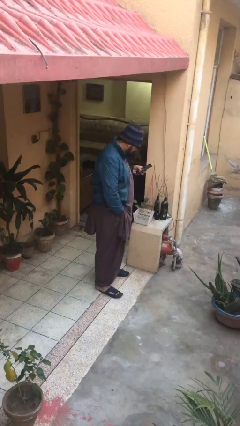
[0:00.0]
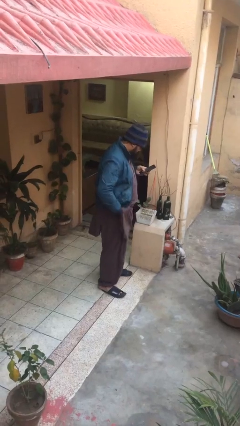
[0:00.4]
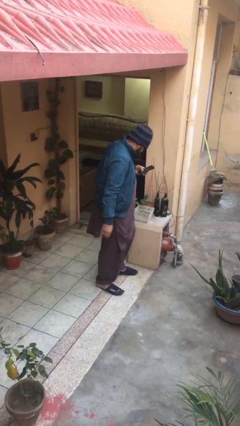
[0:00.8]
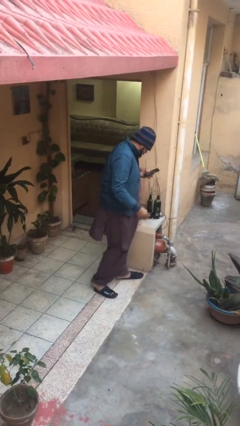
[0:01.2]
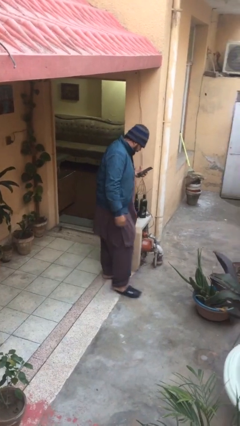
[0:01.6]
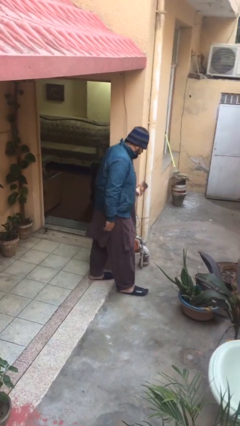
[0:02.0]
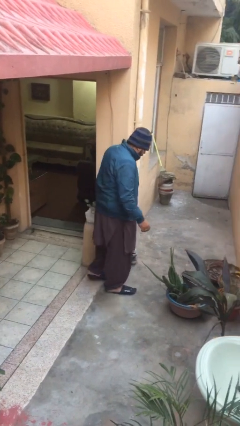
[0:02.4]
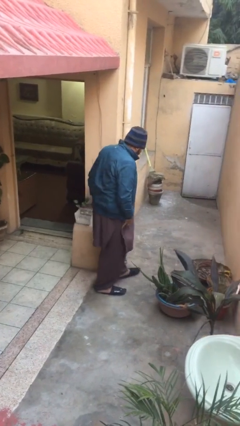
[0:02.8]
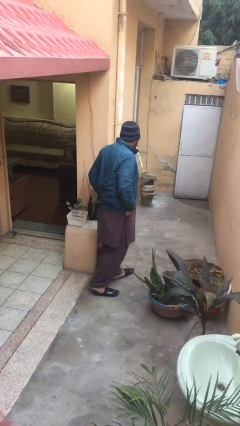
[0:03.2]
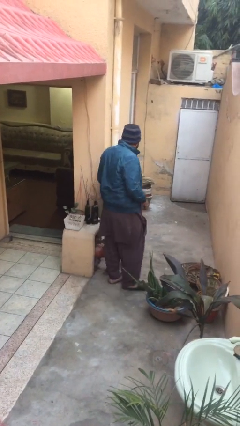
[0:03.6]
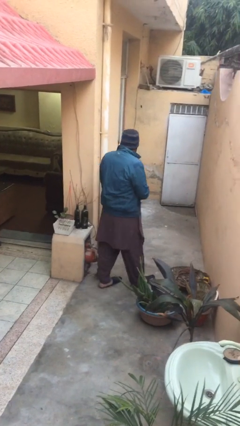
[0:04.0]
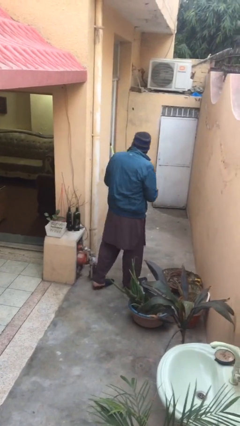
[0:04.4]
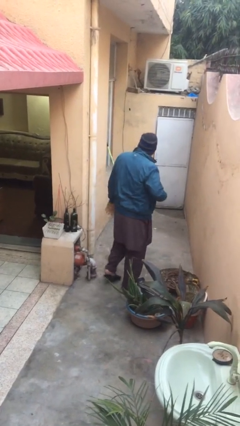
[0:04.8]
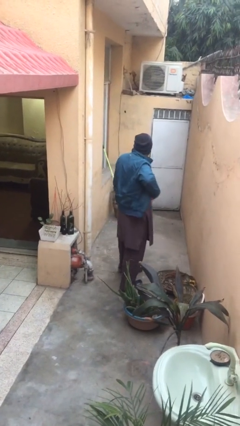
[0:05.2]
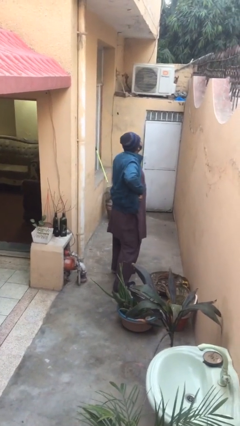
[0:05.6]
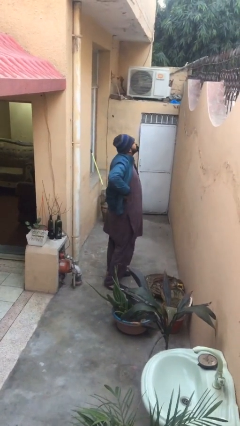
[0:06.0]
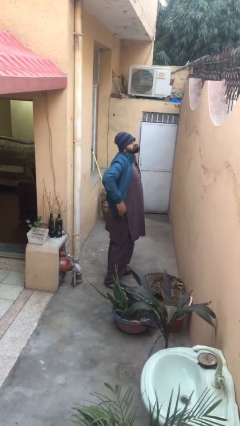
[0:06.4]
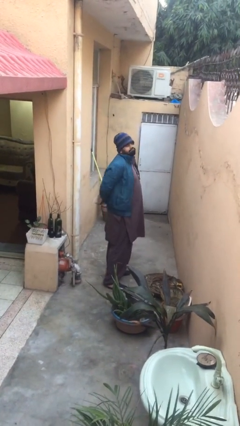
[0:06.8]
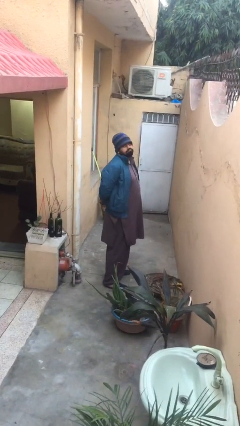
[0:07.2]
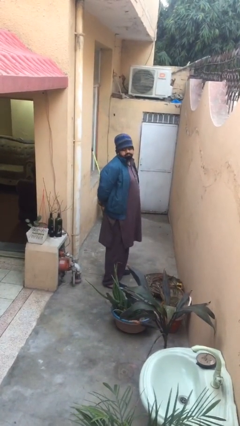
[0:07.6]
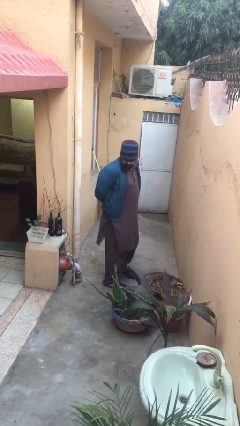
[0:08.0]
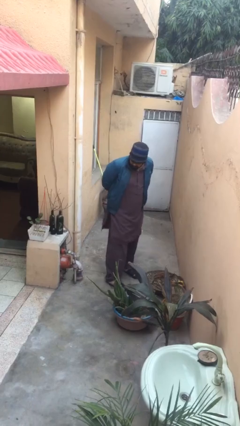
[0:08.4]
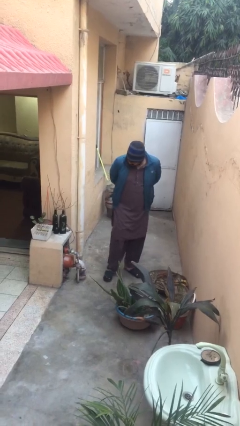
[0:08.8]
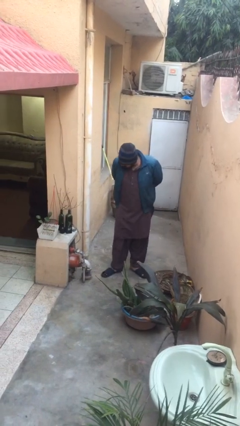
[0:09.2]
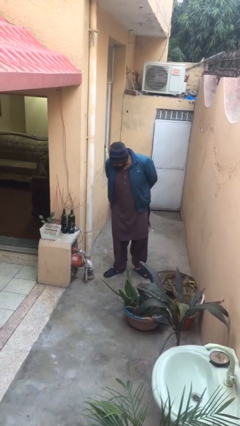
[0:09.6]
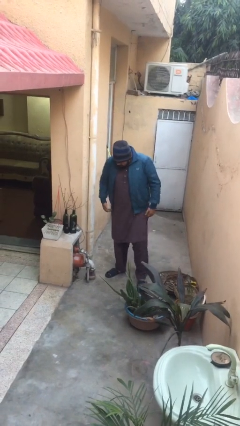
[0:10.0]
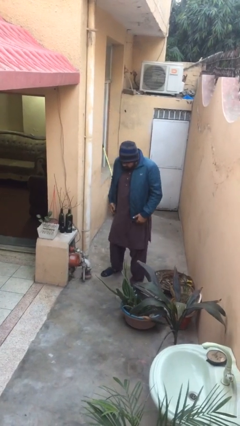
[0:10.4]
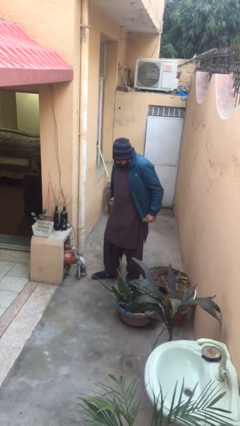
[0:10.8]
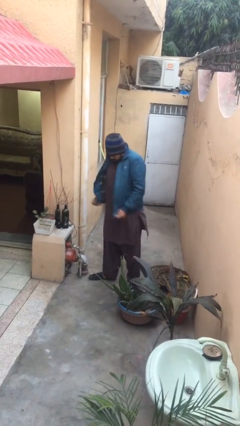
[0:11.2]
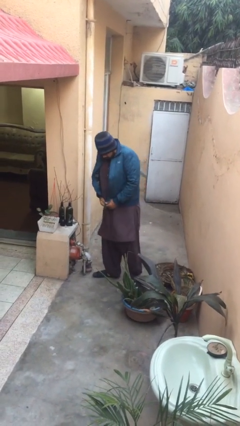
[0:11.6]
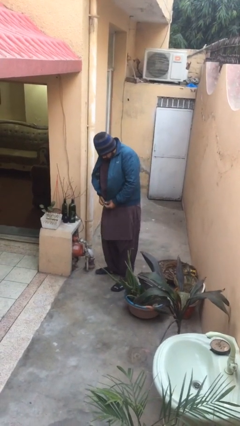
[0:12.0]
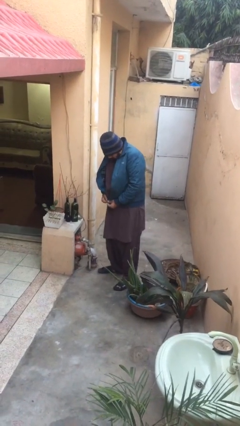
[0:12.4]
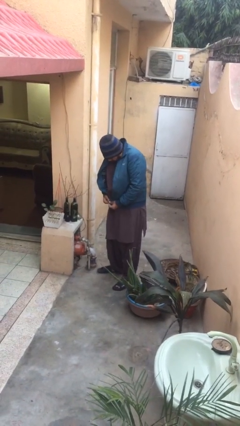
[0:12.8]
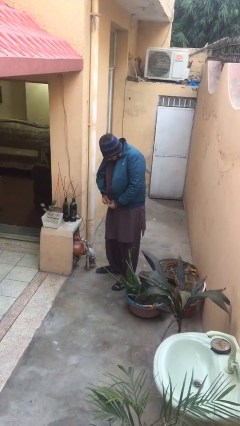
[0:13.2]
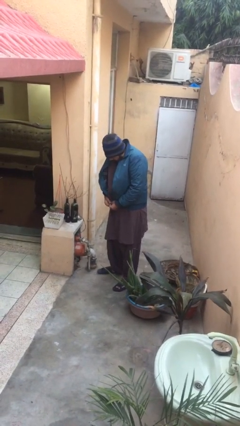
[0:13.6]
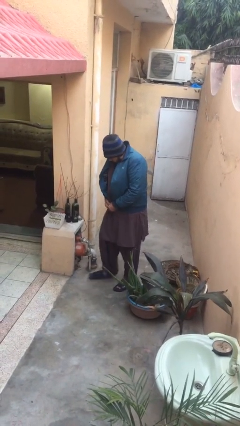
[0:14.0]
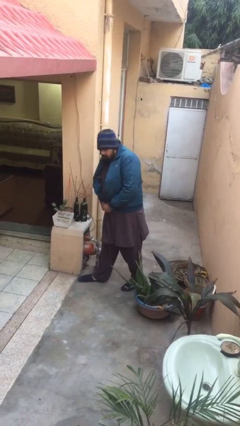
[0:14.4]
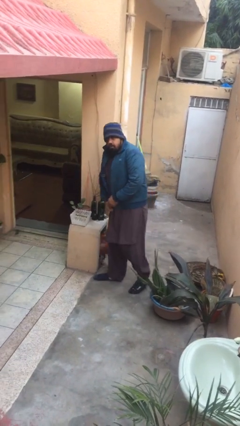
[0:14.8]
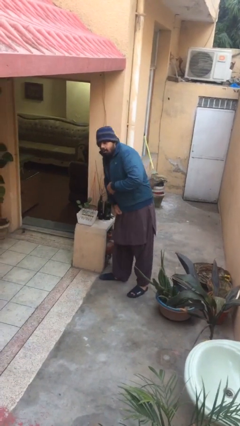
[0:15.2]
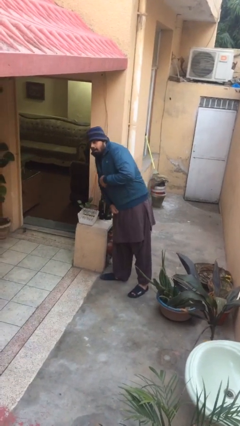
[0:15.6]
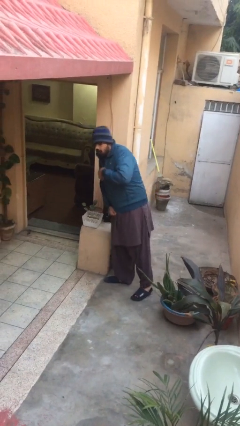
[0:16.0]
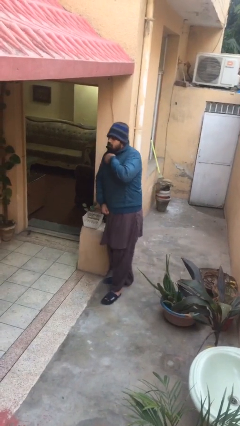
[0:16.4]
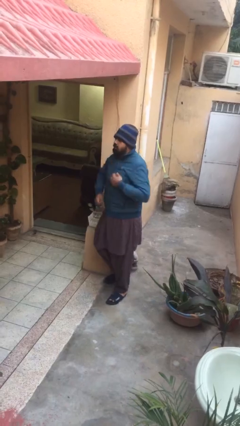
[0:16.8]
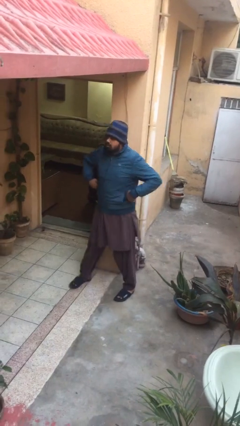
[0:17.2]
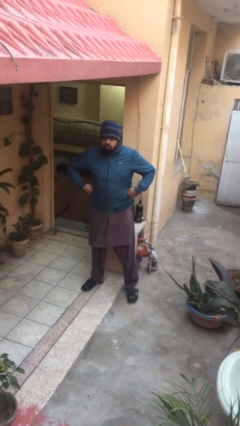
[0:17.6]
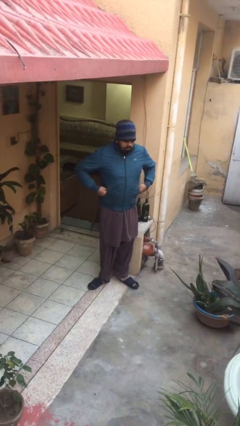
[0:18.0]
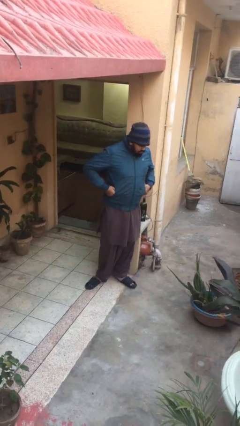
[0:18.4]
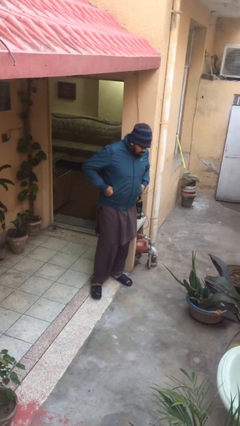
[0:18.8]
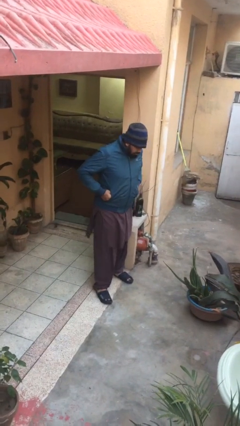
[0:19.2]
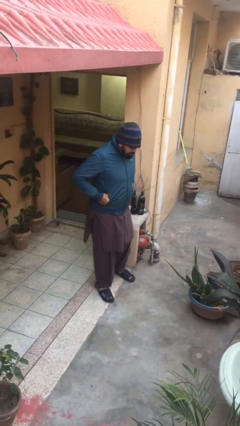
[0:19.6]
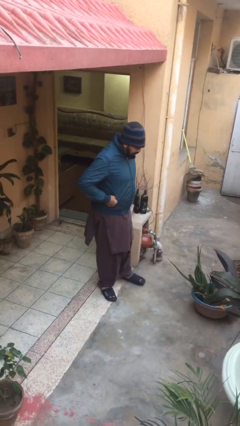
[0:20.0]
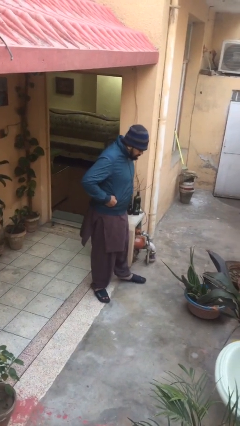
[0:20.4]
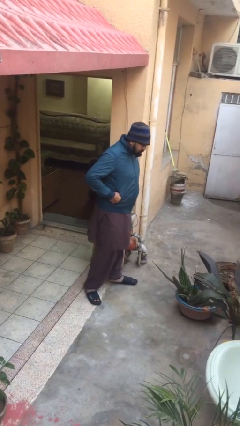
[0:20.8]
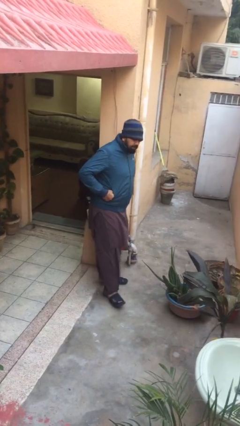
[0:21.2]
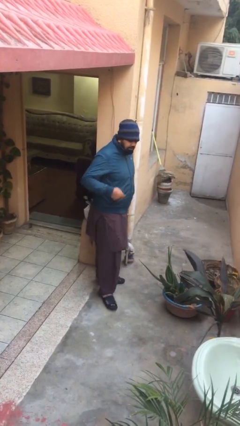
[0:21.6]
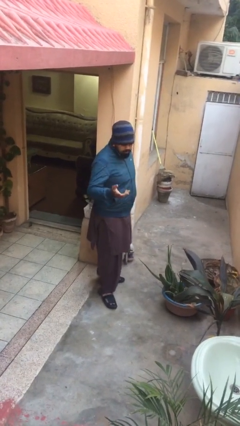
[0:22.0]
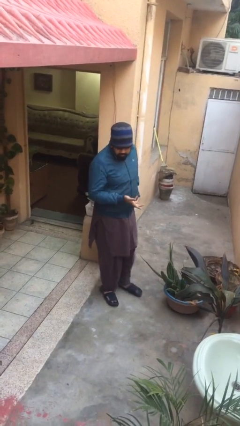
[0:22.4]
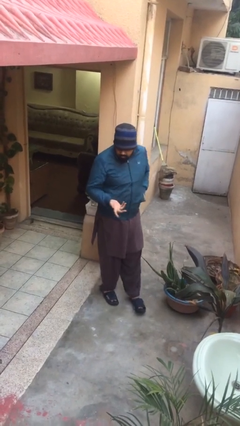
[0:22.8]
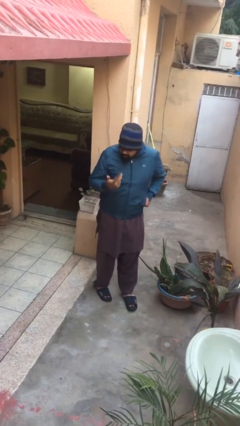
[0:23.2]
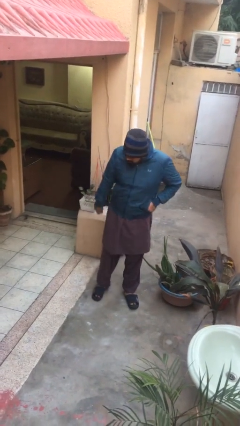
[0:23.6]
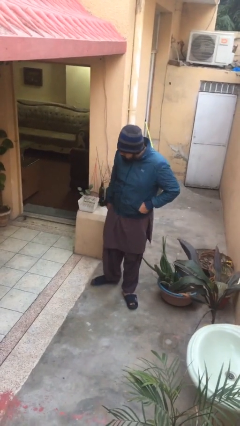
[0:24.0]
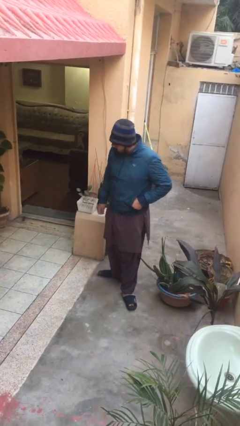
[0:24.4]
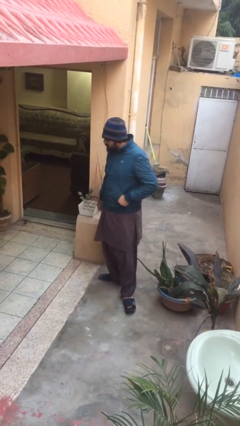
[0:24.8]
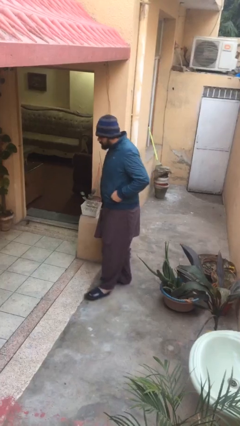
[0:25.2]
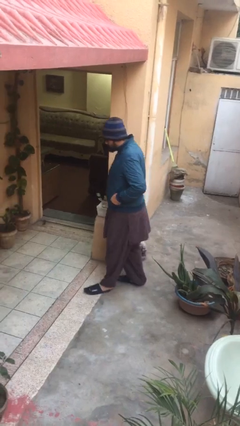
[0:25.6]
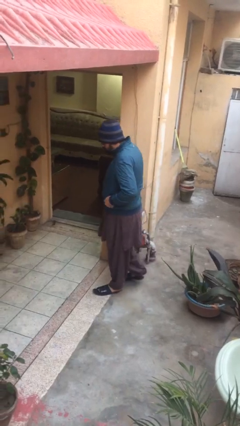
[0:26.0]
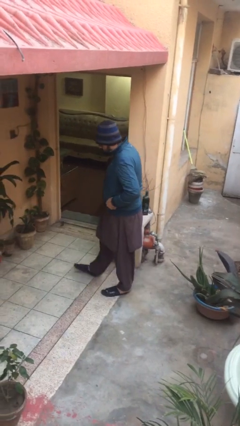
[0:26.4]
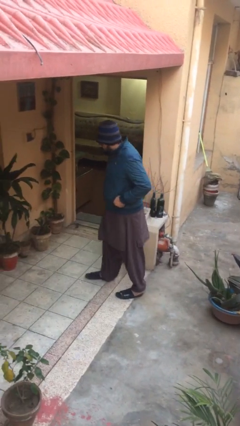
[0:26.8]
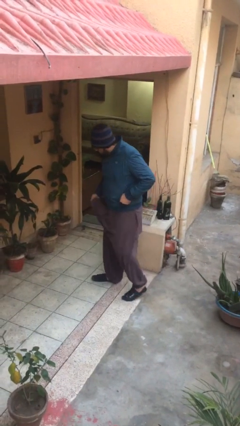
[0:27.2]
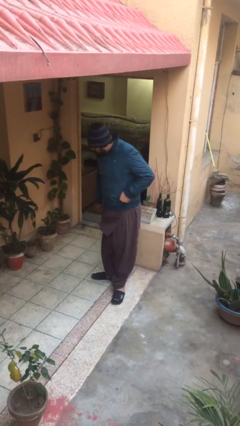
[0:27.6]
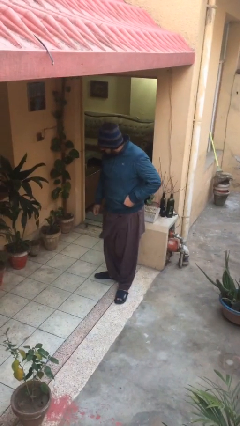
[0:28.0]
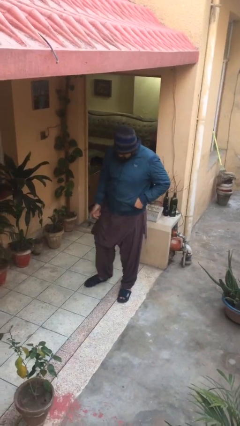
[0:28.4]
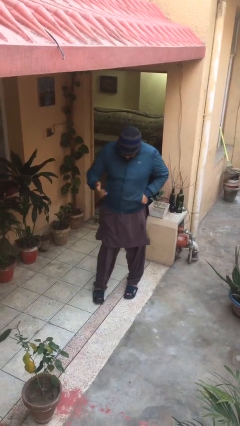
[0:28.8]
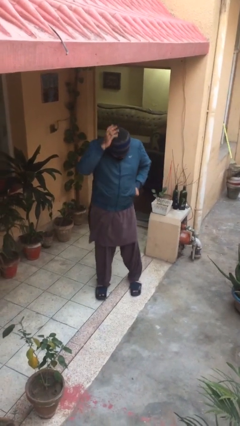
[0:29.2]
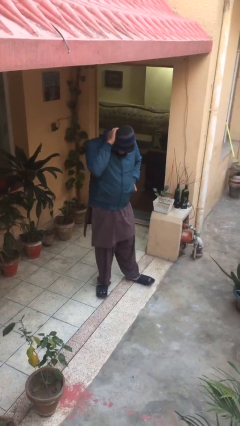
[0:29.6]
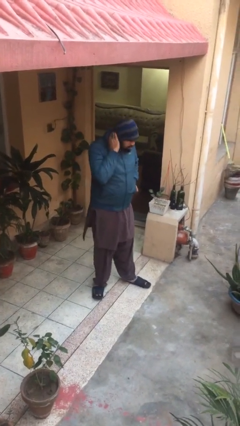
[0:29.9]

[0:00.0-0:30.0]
person walks

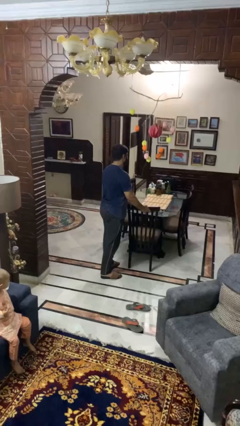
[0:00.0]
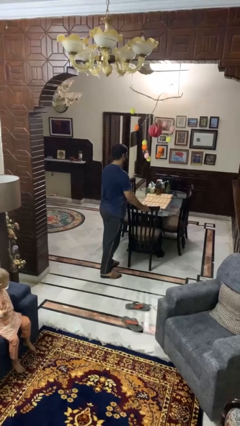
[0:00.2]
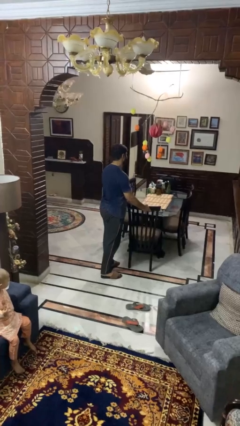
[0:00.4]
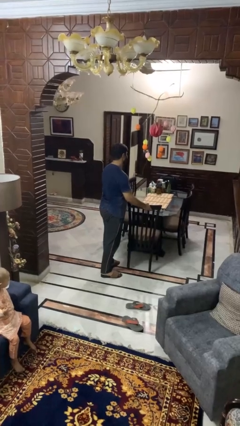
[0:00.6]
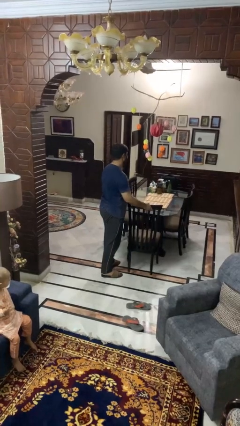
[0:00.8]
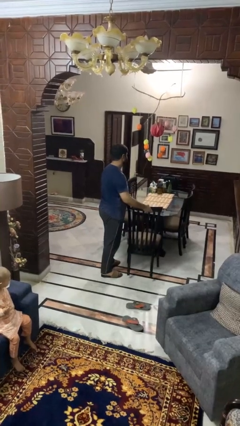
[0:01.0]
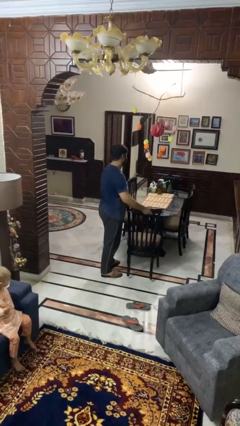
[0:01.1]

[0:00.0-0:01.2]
person pulls out chair

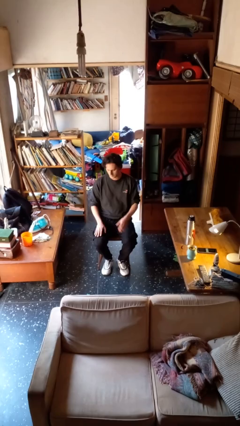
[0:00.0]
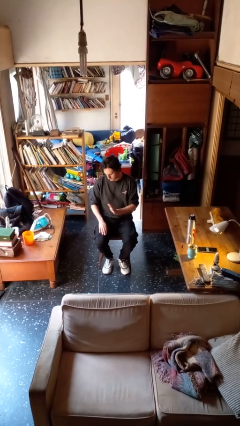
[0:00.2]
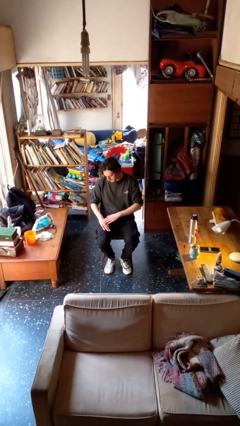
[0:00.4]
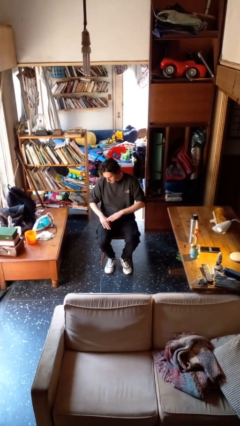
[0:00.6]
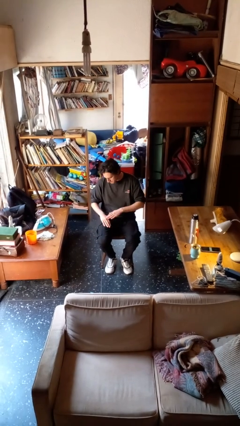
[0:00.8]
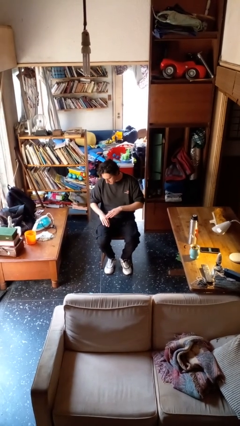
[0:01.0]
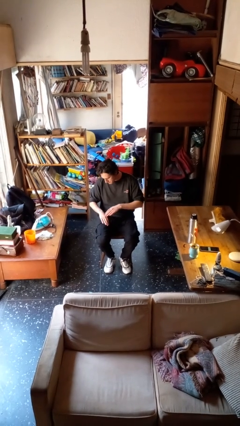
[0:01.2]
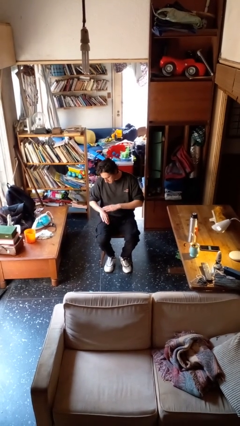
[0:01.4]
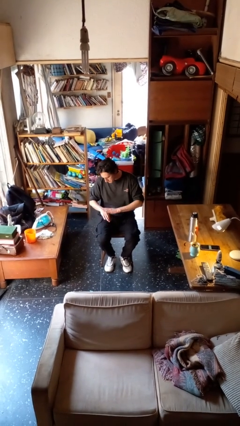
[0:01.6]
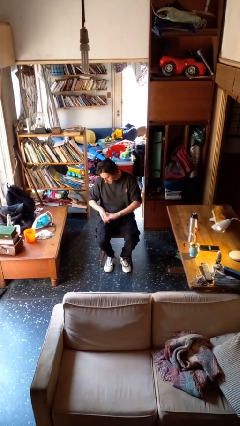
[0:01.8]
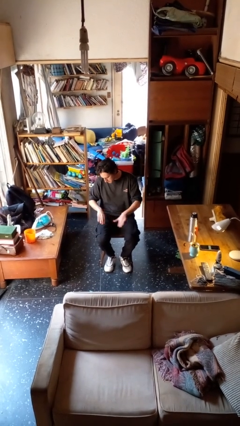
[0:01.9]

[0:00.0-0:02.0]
person swats bug
